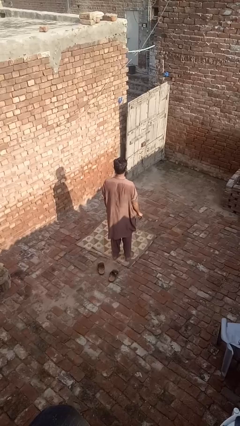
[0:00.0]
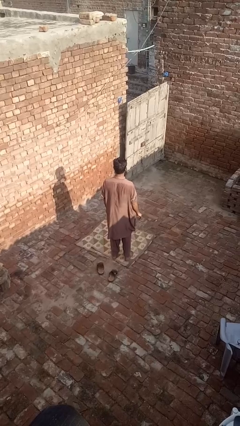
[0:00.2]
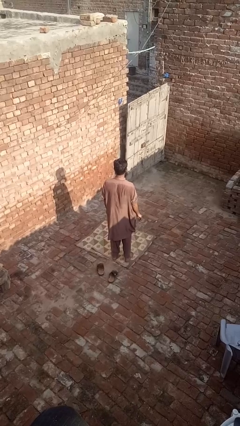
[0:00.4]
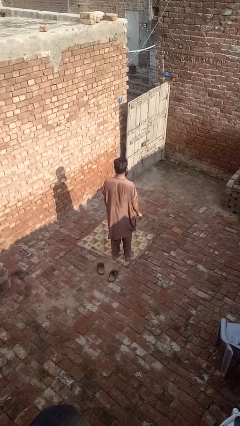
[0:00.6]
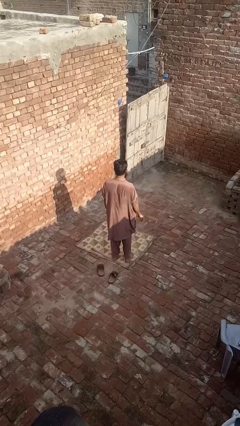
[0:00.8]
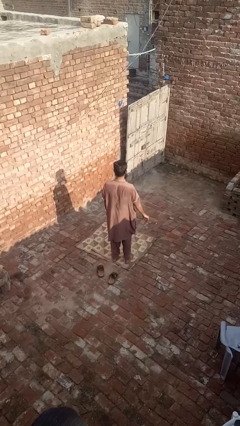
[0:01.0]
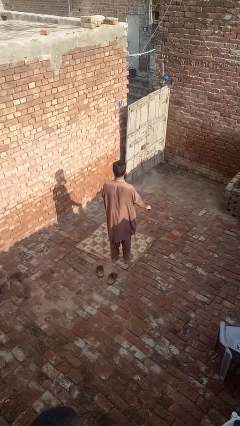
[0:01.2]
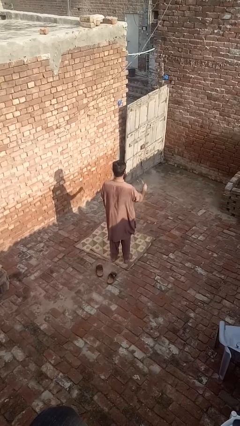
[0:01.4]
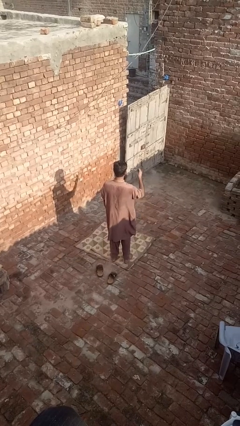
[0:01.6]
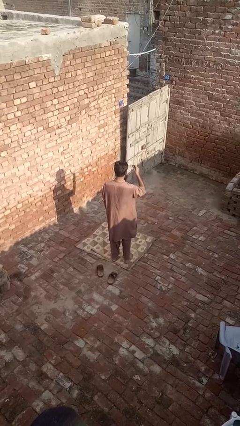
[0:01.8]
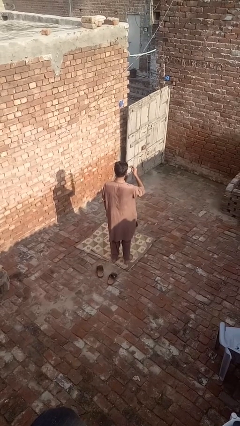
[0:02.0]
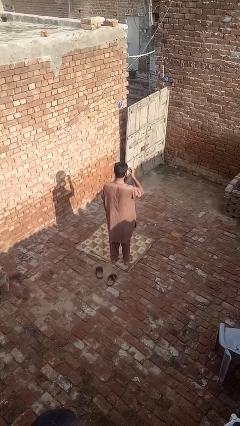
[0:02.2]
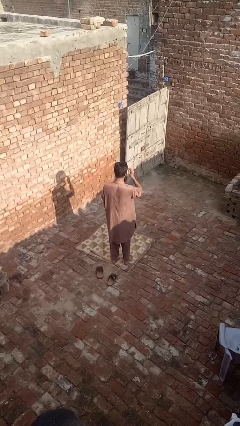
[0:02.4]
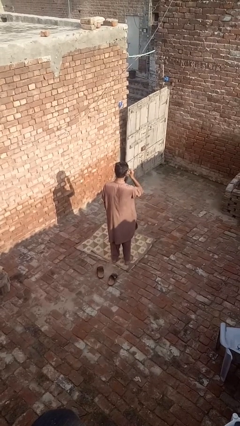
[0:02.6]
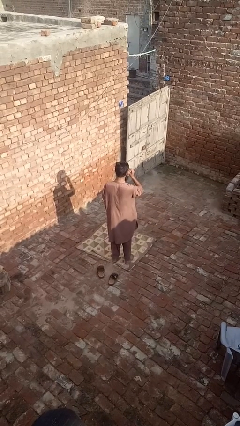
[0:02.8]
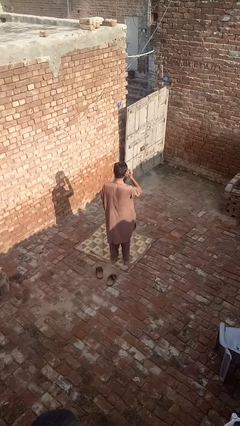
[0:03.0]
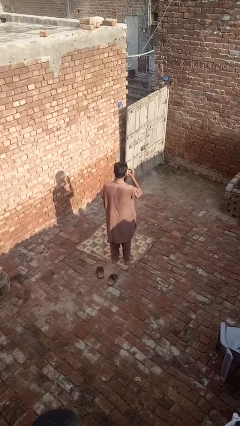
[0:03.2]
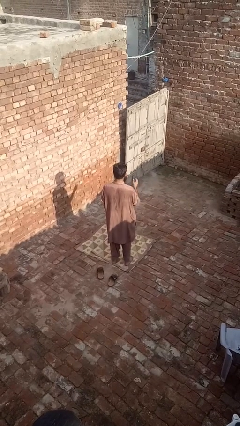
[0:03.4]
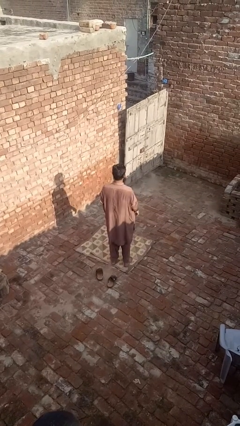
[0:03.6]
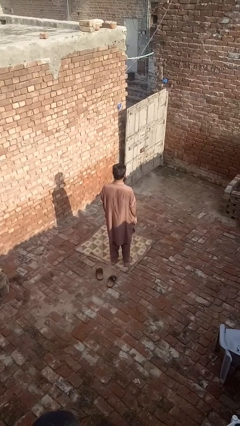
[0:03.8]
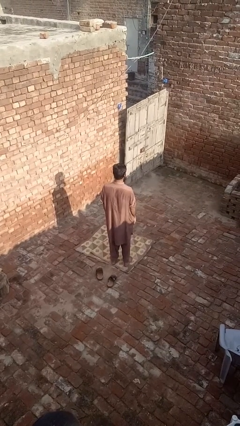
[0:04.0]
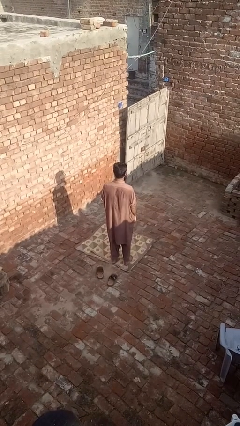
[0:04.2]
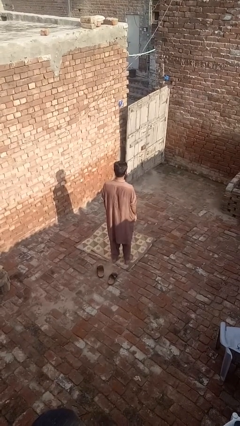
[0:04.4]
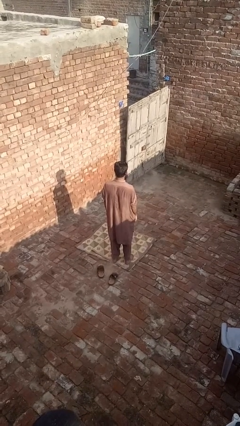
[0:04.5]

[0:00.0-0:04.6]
person puts on glasses

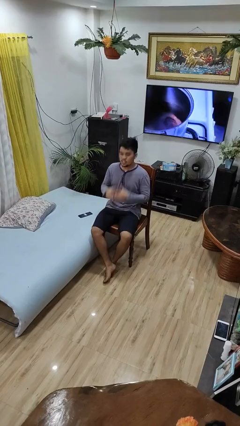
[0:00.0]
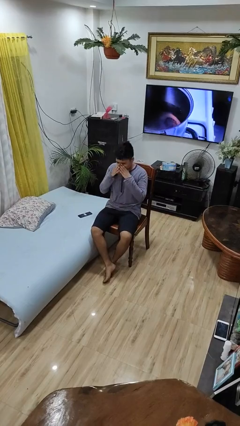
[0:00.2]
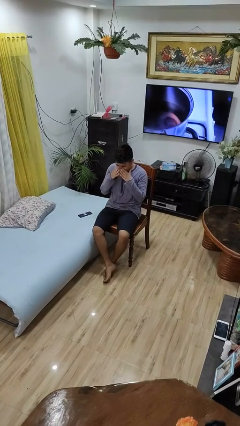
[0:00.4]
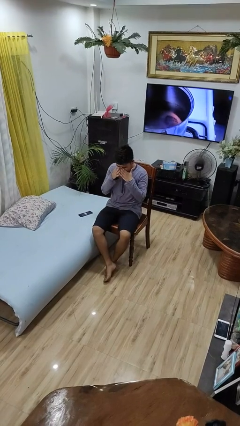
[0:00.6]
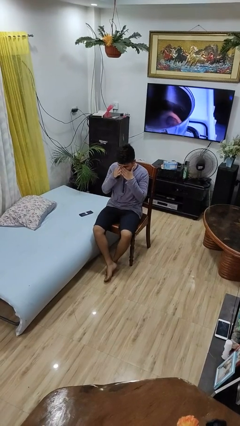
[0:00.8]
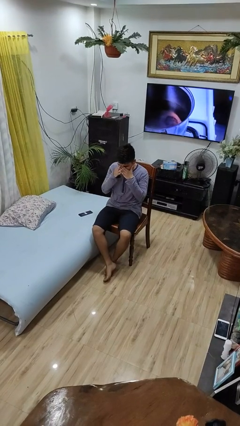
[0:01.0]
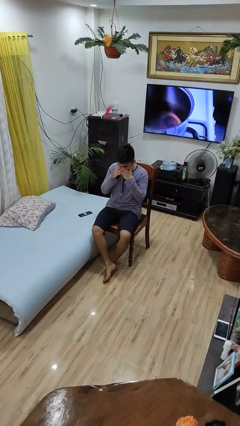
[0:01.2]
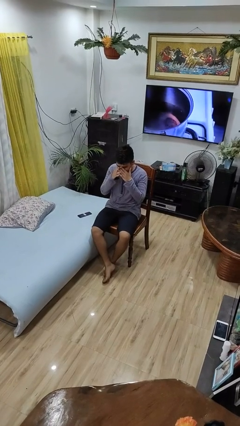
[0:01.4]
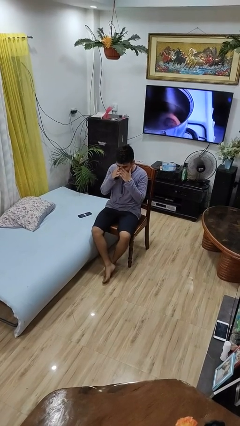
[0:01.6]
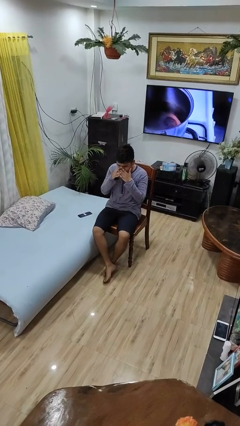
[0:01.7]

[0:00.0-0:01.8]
person sneezes into hand

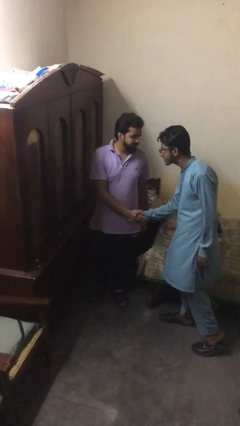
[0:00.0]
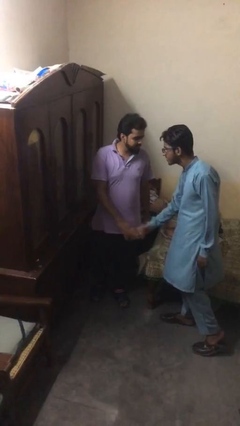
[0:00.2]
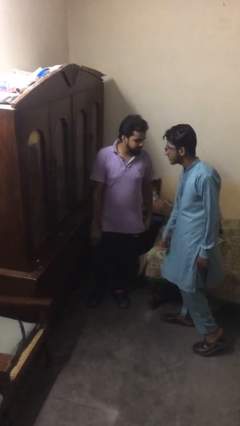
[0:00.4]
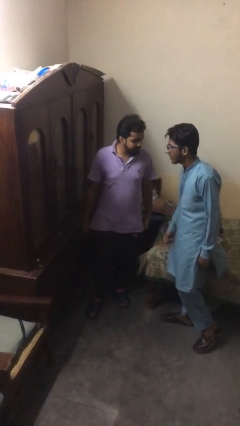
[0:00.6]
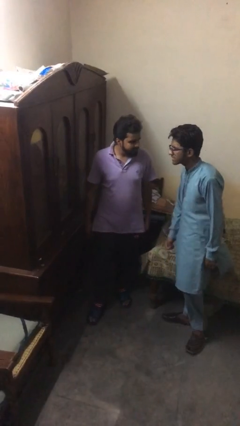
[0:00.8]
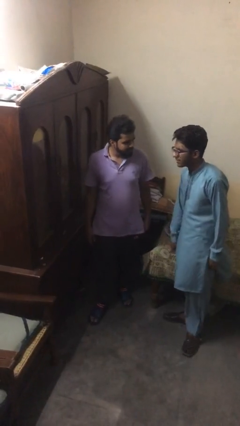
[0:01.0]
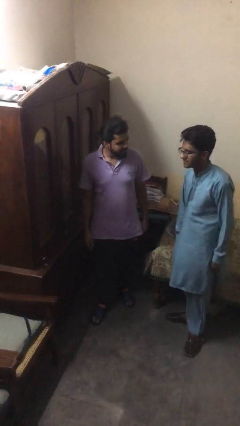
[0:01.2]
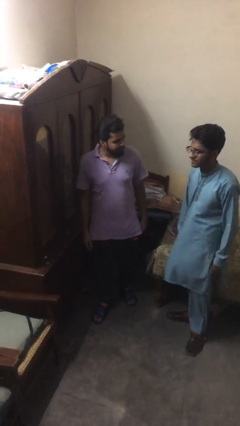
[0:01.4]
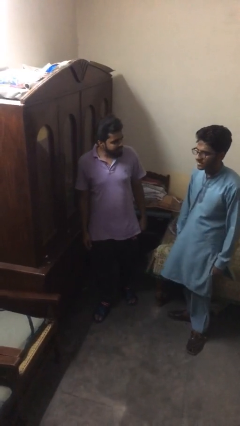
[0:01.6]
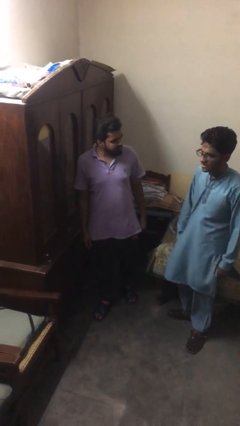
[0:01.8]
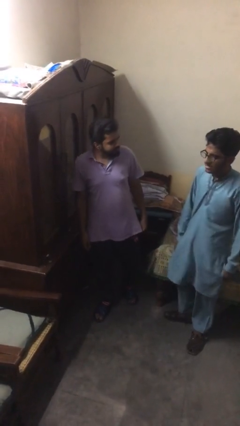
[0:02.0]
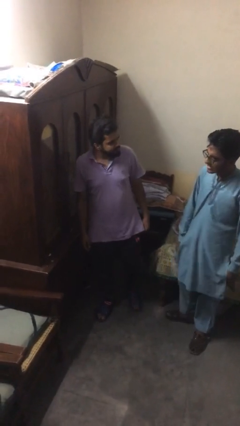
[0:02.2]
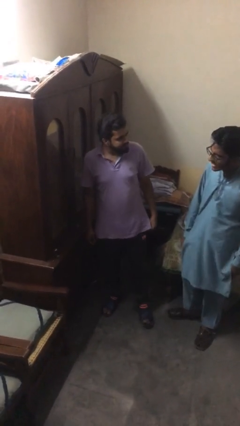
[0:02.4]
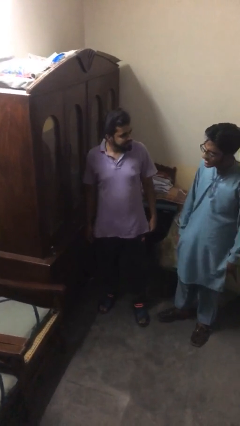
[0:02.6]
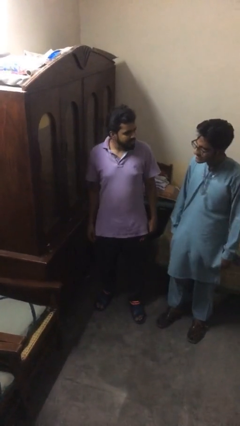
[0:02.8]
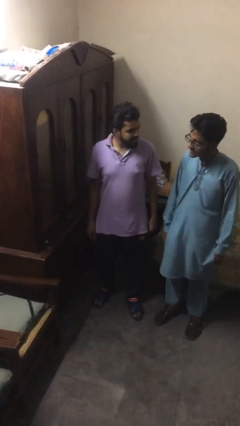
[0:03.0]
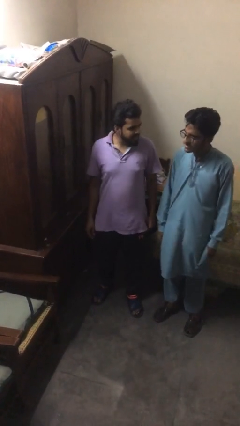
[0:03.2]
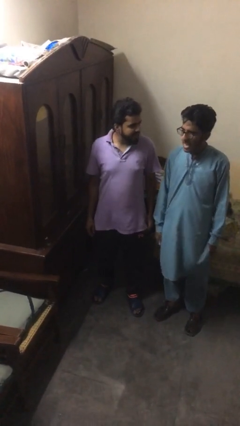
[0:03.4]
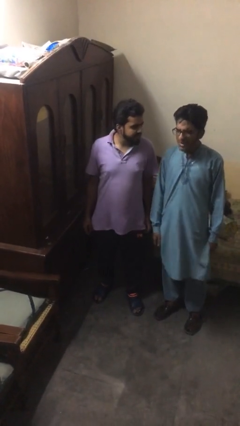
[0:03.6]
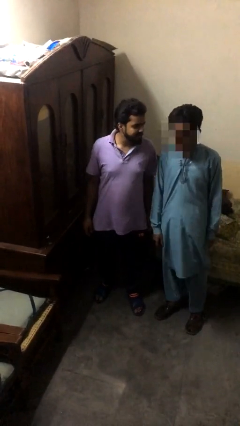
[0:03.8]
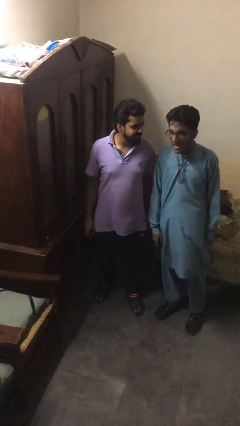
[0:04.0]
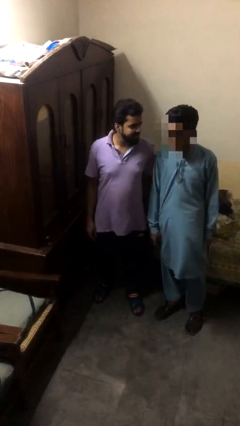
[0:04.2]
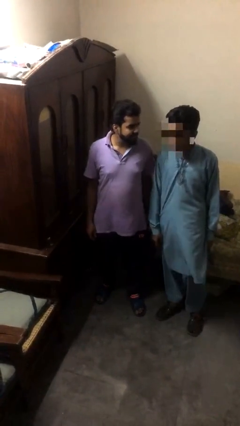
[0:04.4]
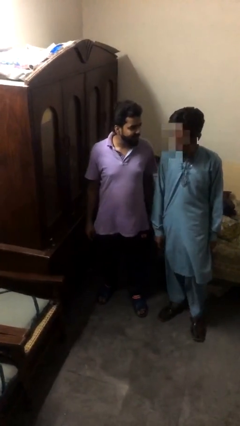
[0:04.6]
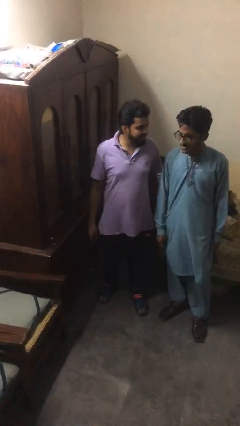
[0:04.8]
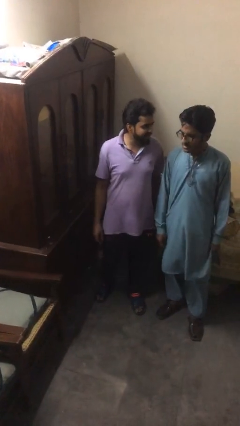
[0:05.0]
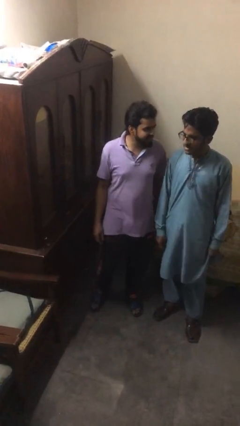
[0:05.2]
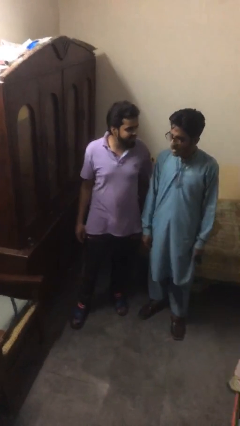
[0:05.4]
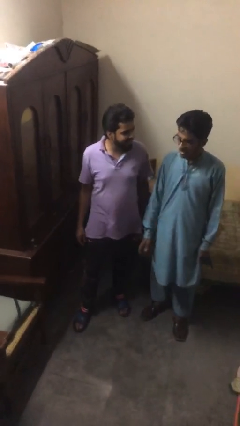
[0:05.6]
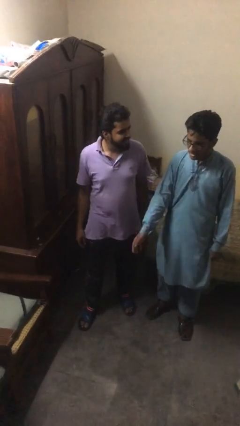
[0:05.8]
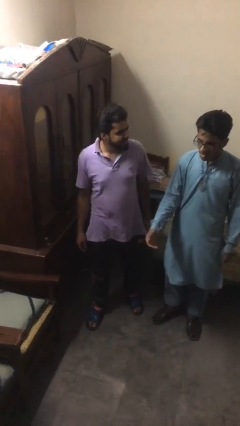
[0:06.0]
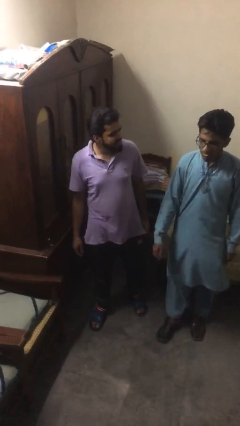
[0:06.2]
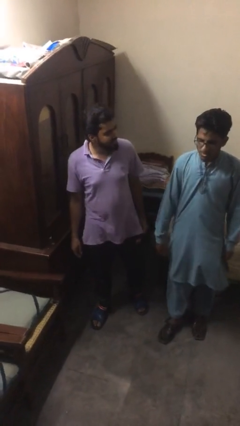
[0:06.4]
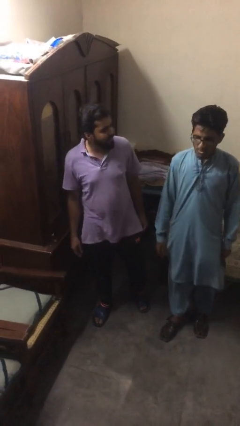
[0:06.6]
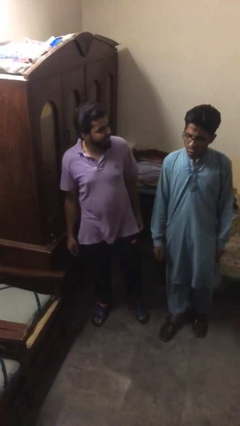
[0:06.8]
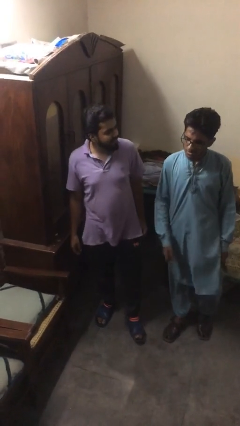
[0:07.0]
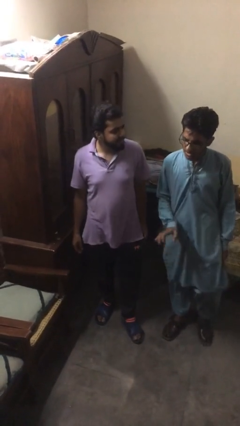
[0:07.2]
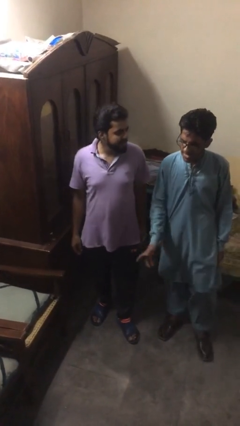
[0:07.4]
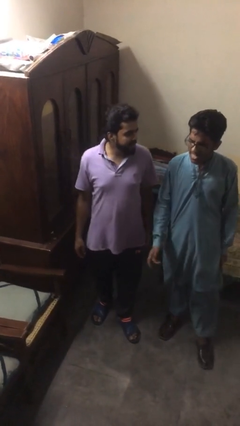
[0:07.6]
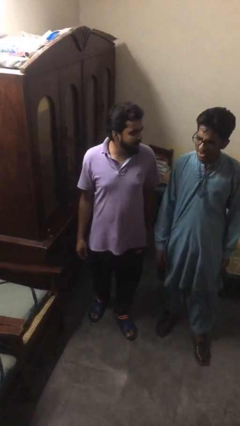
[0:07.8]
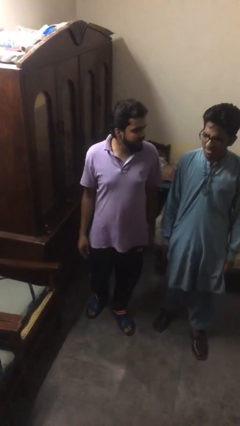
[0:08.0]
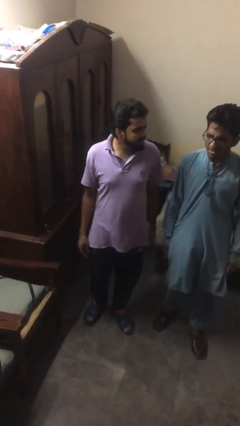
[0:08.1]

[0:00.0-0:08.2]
person talks to person

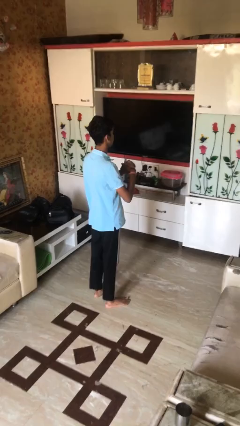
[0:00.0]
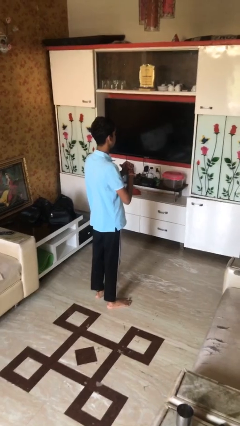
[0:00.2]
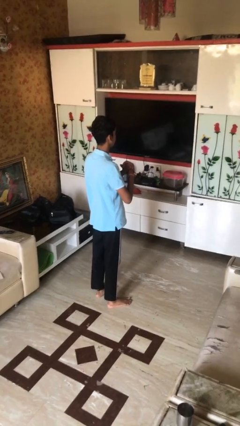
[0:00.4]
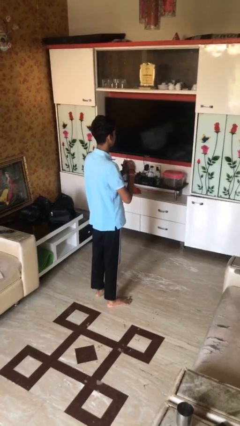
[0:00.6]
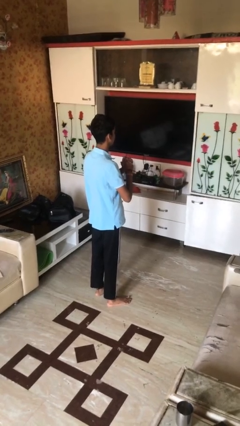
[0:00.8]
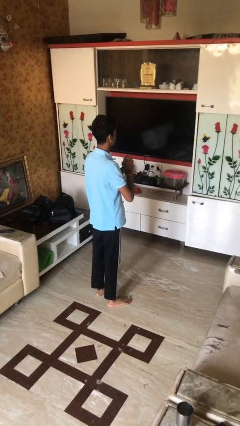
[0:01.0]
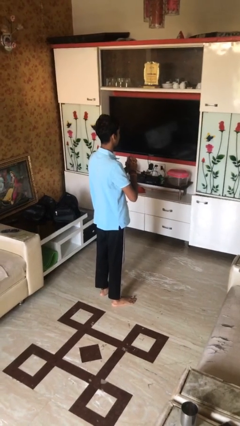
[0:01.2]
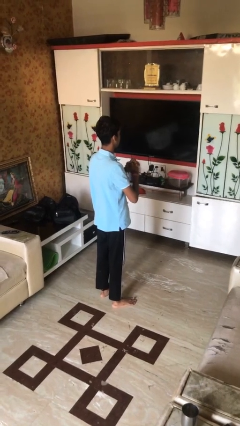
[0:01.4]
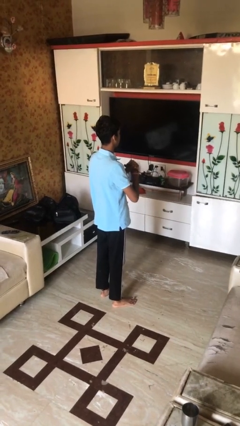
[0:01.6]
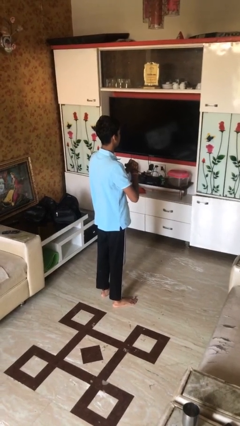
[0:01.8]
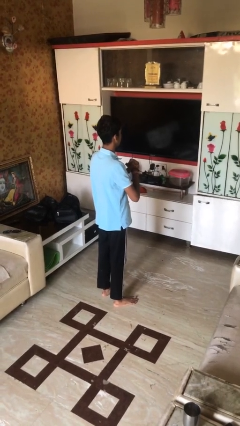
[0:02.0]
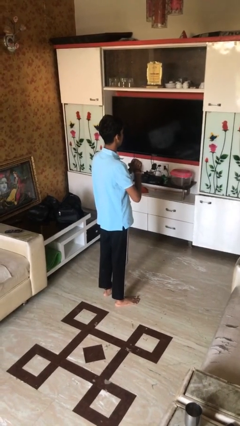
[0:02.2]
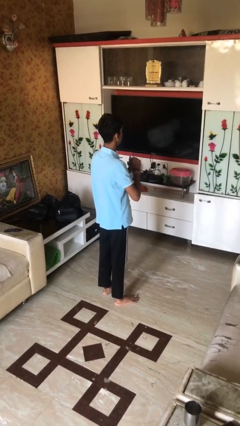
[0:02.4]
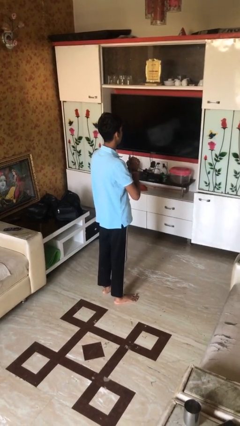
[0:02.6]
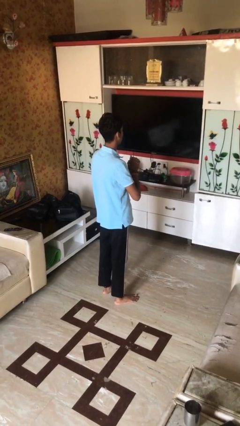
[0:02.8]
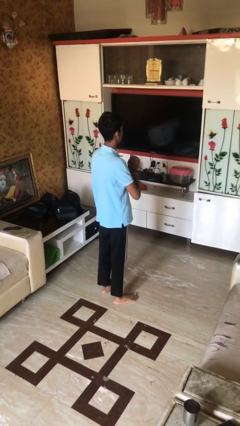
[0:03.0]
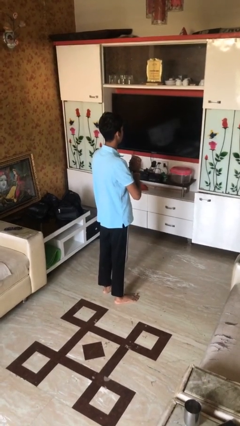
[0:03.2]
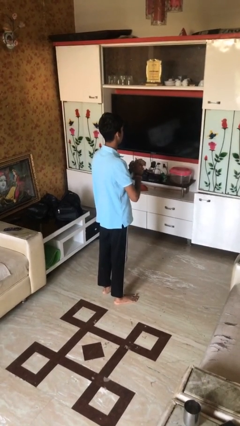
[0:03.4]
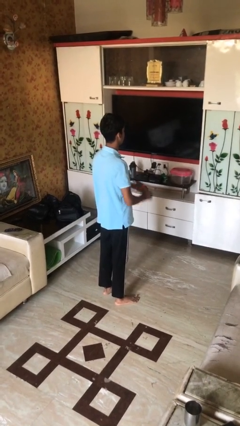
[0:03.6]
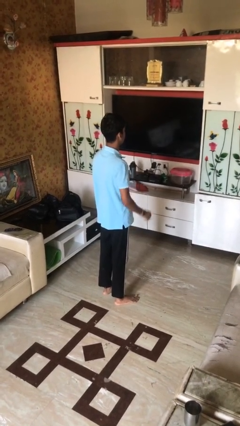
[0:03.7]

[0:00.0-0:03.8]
person cracks knuckles
